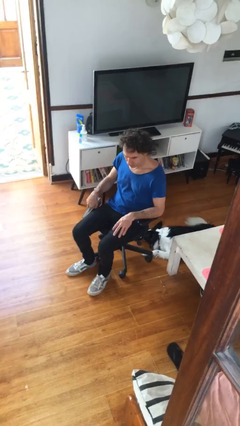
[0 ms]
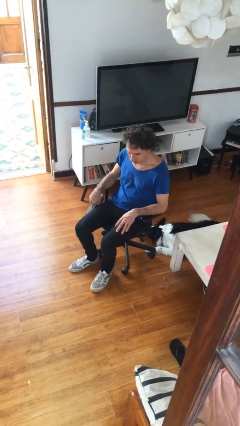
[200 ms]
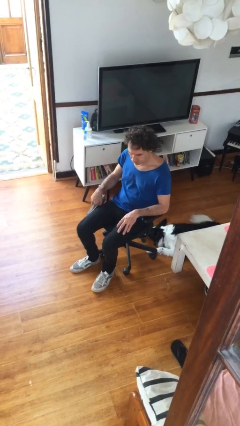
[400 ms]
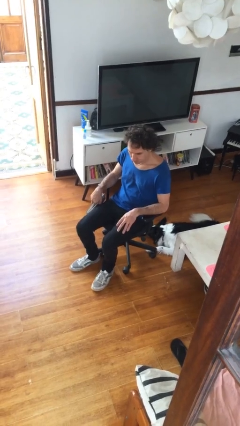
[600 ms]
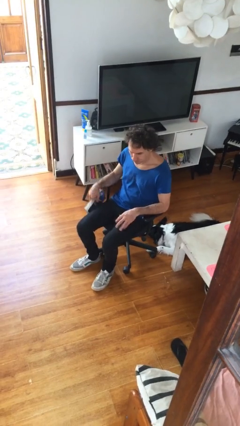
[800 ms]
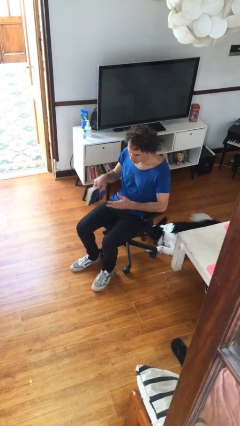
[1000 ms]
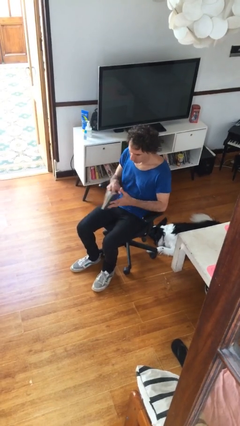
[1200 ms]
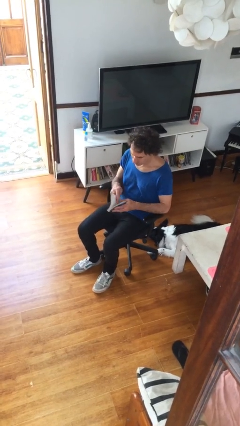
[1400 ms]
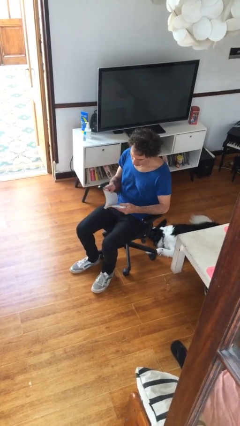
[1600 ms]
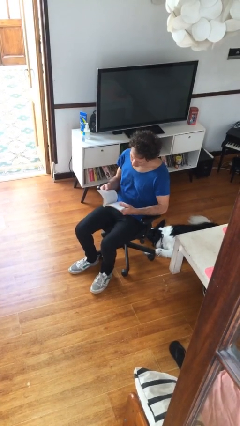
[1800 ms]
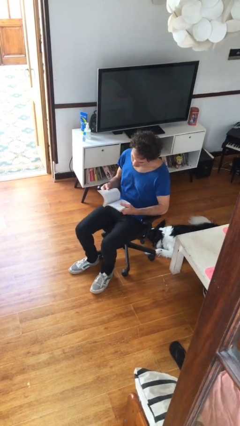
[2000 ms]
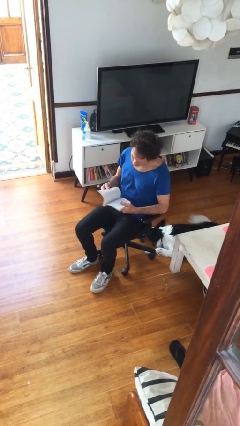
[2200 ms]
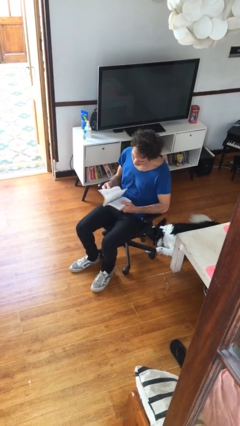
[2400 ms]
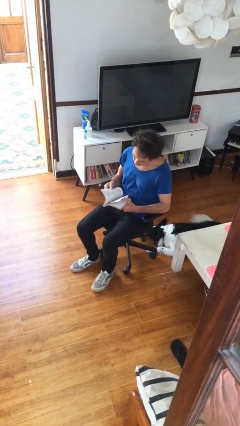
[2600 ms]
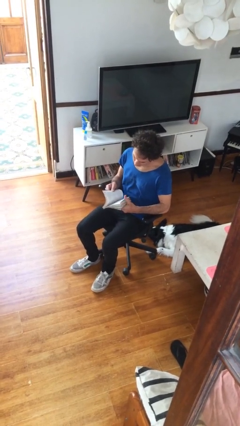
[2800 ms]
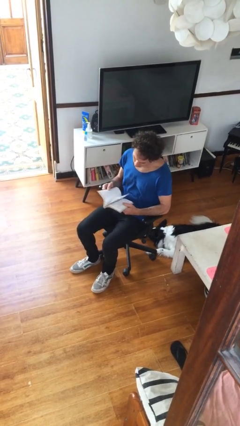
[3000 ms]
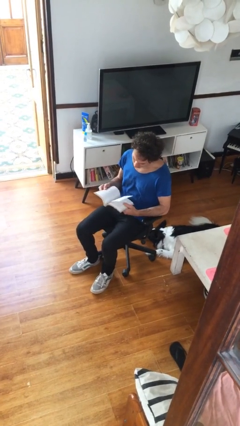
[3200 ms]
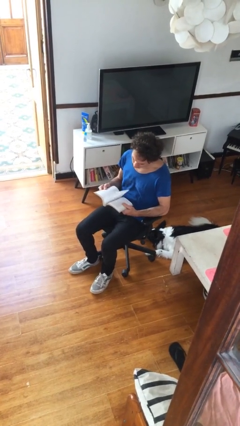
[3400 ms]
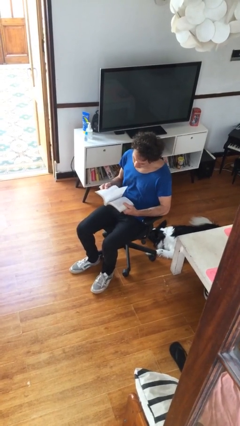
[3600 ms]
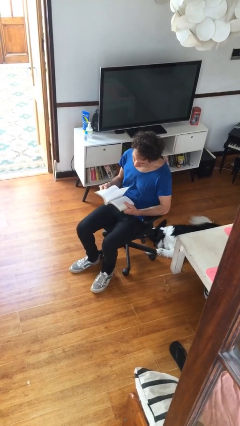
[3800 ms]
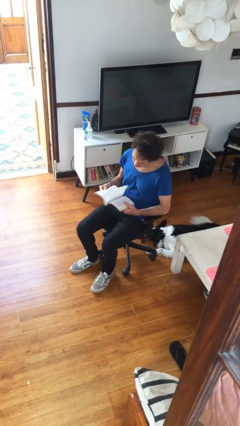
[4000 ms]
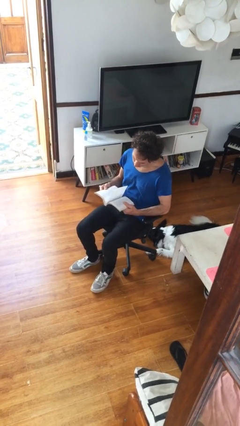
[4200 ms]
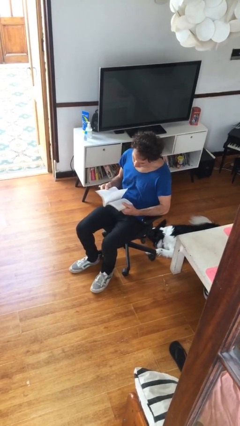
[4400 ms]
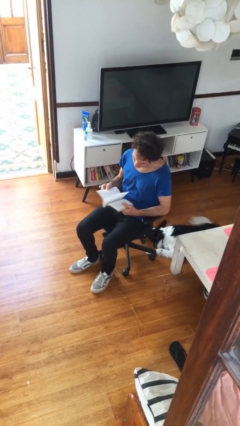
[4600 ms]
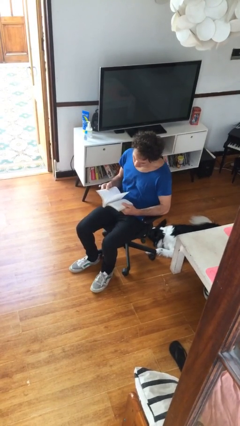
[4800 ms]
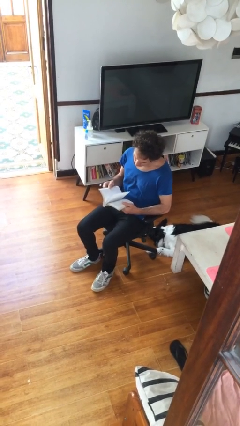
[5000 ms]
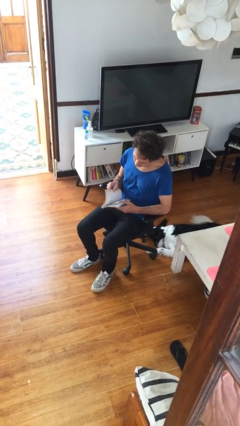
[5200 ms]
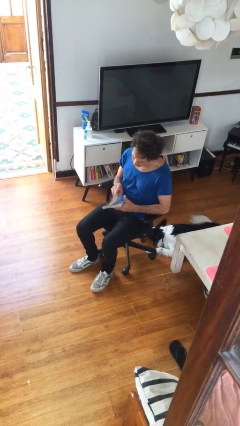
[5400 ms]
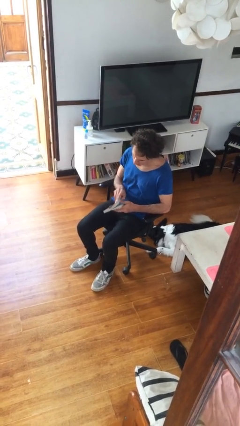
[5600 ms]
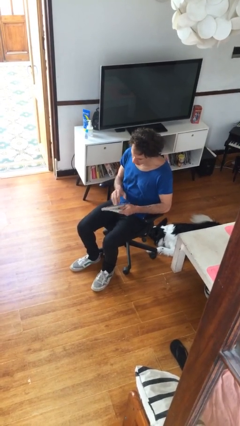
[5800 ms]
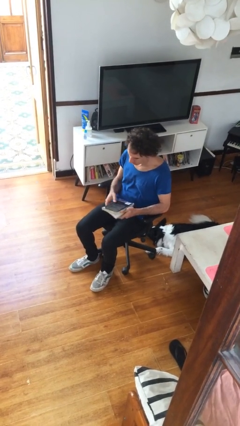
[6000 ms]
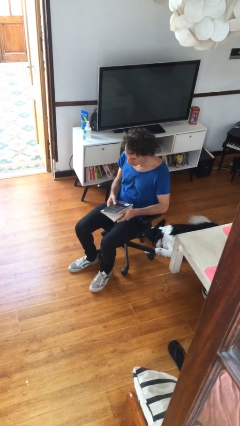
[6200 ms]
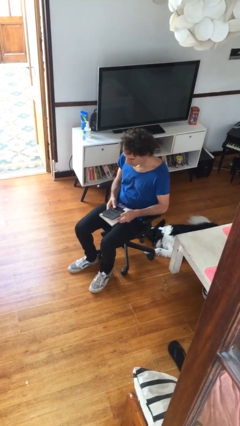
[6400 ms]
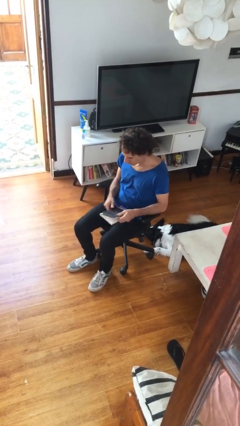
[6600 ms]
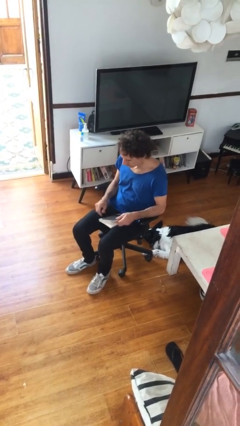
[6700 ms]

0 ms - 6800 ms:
person reads document

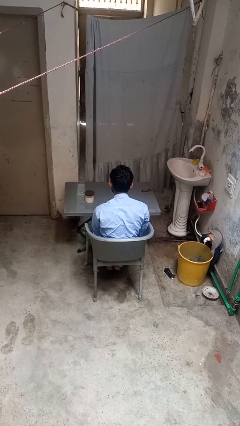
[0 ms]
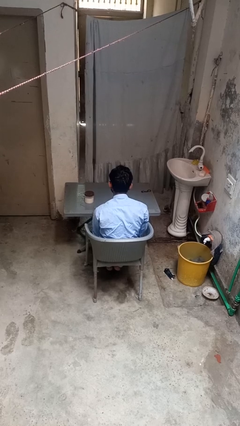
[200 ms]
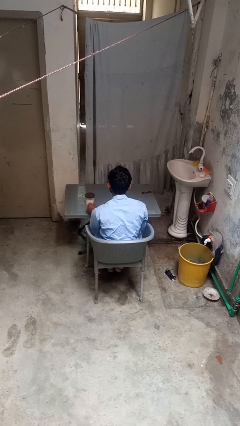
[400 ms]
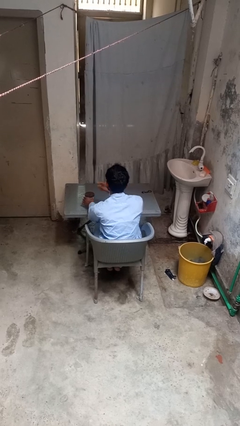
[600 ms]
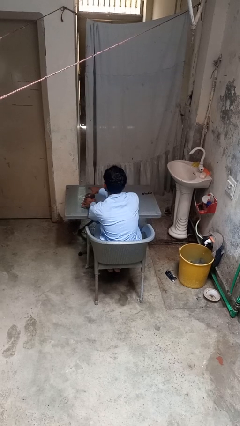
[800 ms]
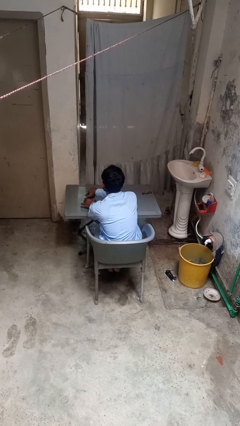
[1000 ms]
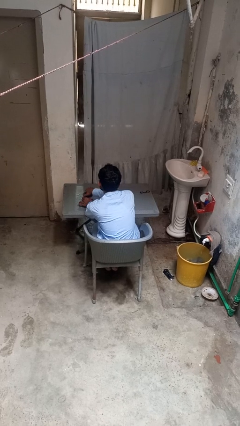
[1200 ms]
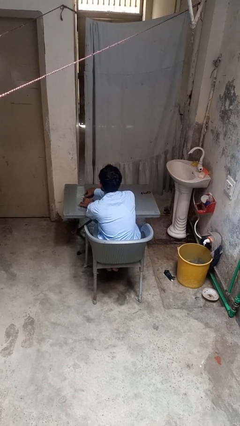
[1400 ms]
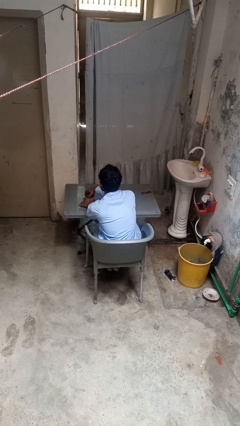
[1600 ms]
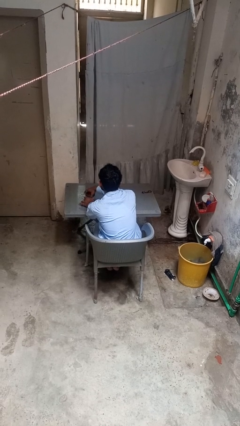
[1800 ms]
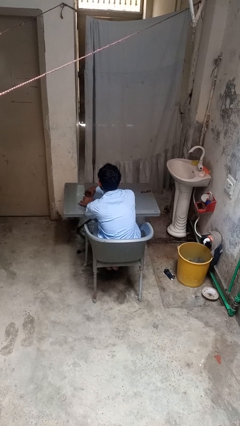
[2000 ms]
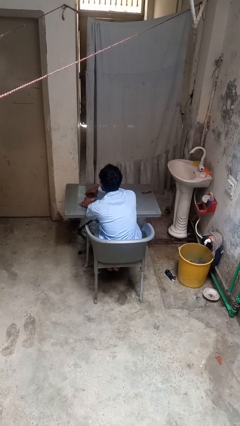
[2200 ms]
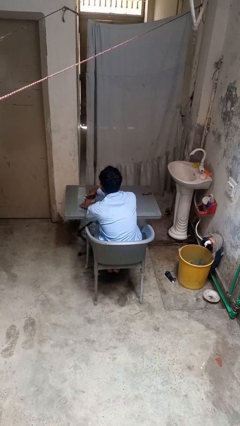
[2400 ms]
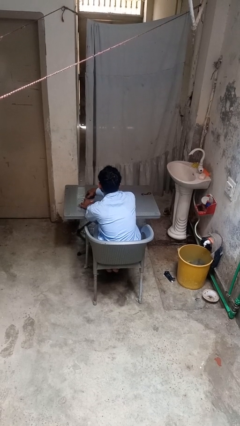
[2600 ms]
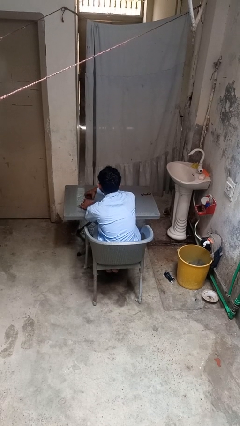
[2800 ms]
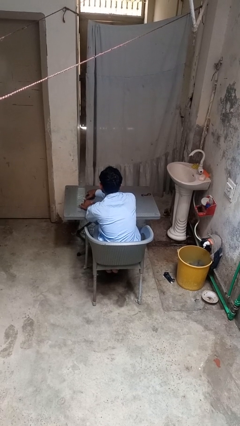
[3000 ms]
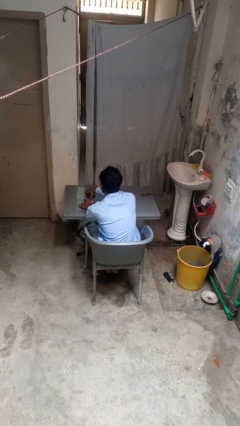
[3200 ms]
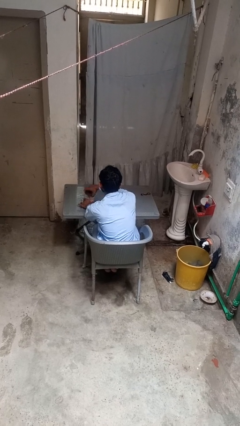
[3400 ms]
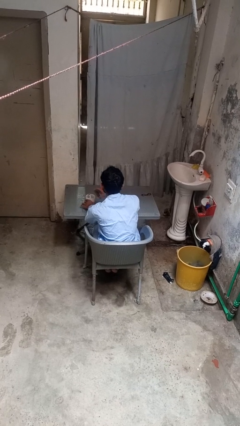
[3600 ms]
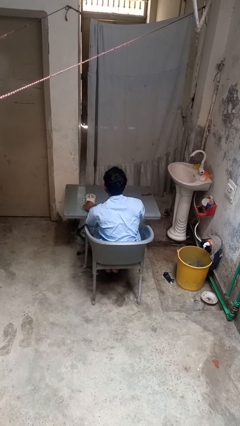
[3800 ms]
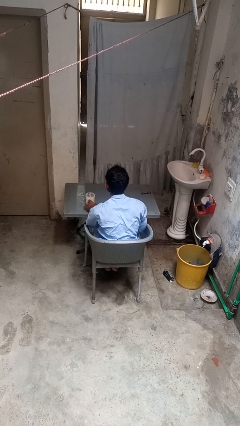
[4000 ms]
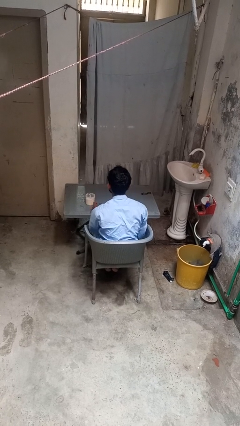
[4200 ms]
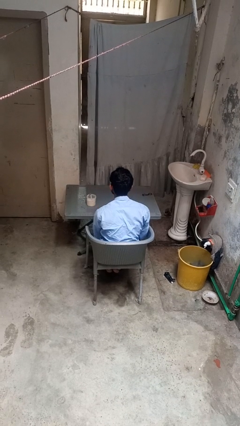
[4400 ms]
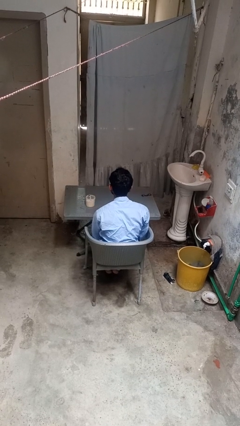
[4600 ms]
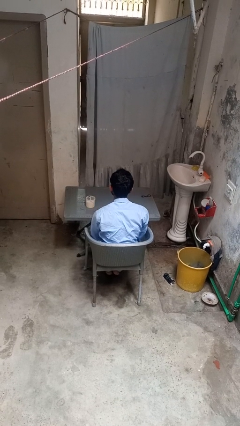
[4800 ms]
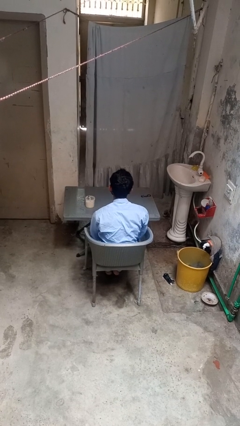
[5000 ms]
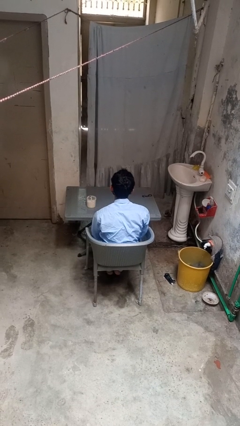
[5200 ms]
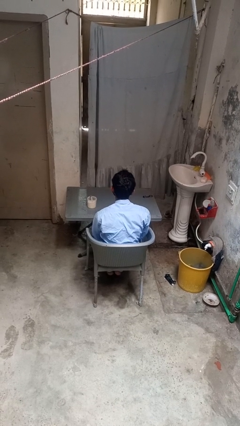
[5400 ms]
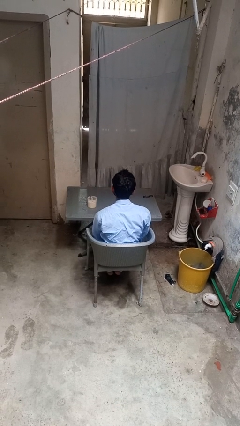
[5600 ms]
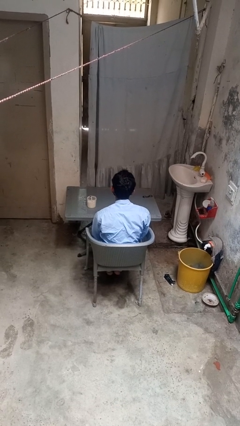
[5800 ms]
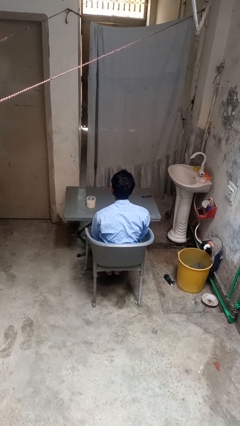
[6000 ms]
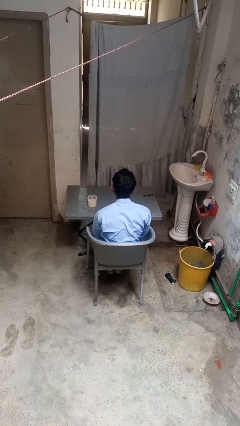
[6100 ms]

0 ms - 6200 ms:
person opens jar

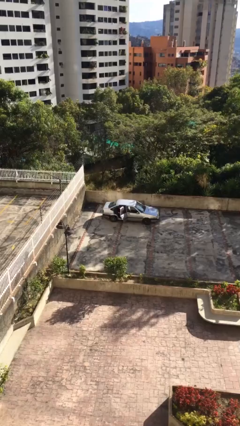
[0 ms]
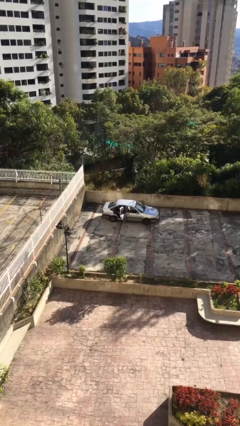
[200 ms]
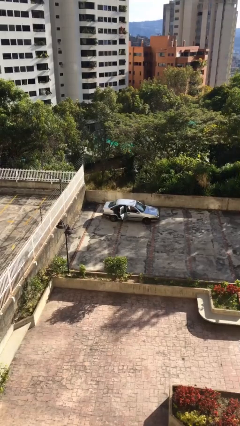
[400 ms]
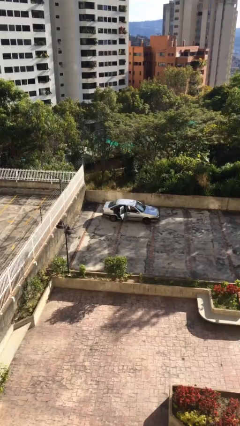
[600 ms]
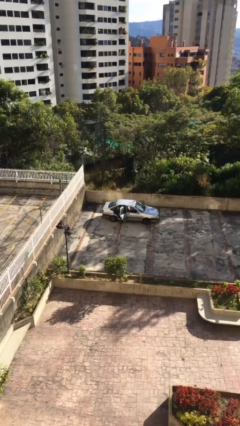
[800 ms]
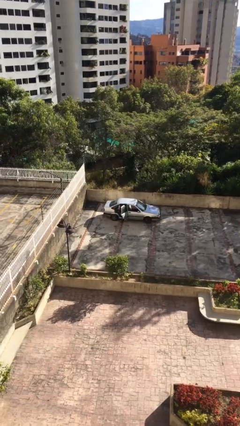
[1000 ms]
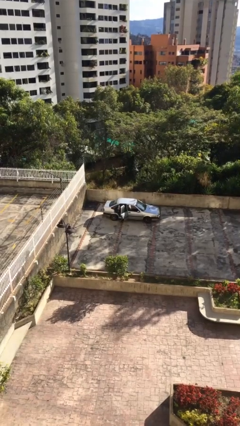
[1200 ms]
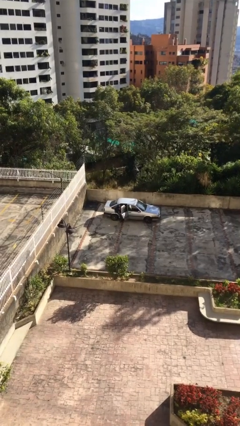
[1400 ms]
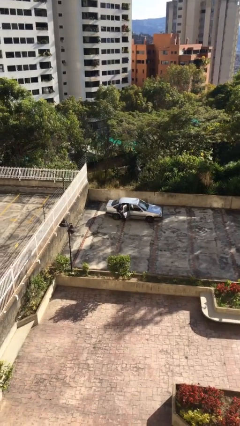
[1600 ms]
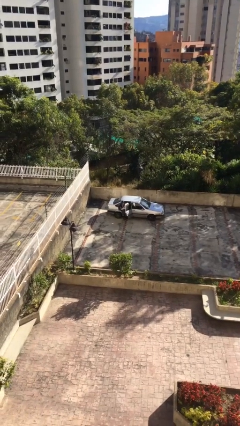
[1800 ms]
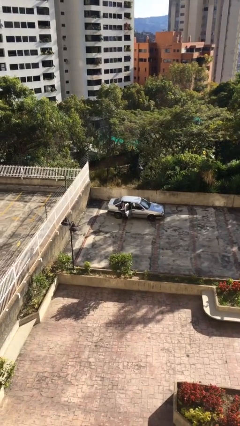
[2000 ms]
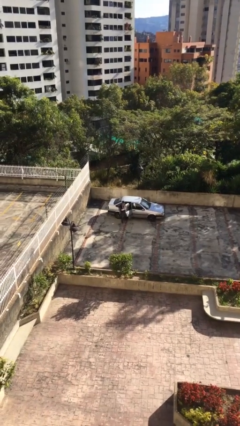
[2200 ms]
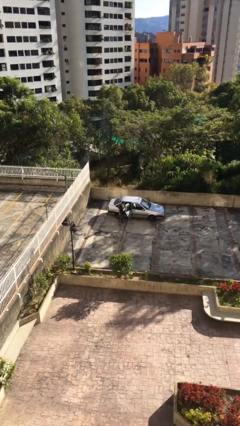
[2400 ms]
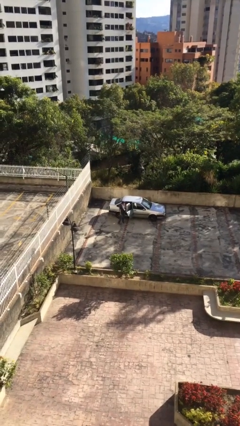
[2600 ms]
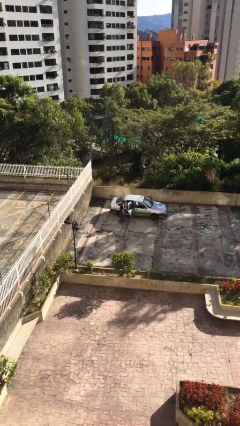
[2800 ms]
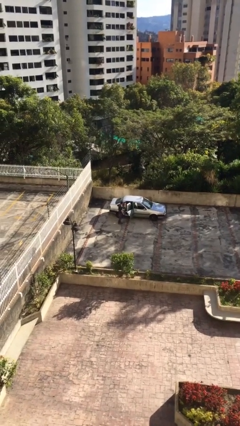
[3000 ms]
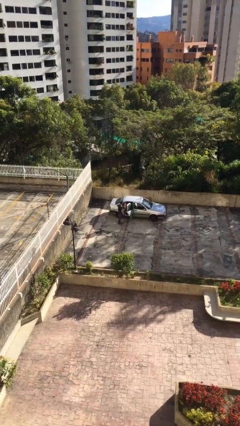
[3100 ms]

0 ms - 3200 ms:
person exits car

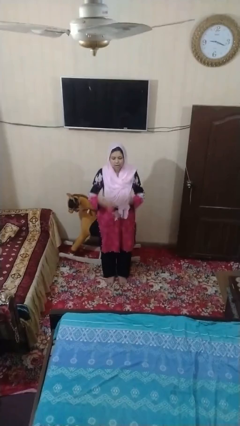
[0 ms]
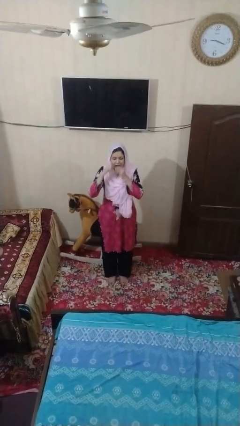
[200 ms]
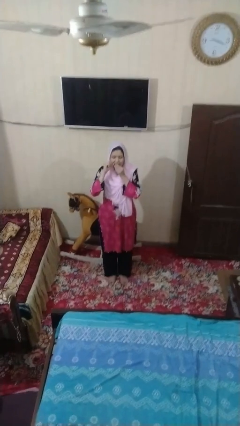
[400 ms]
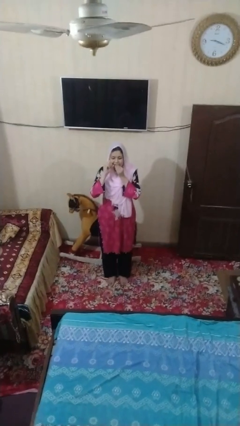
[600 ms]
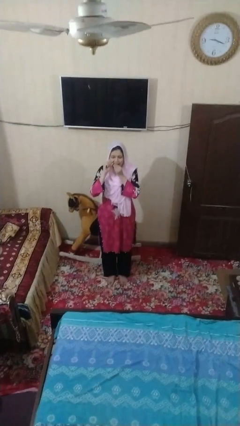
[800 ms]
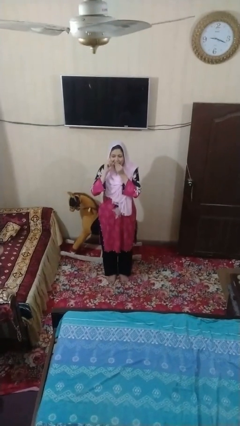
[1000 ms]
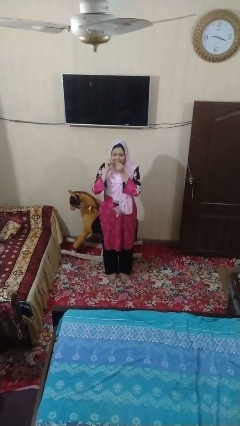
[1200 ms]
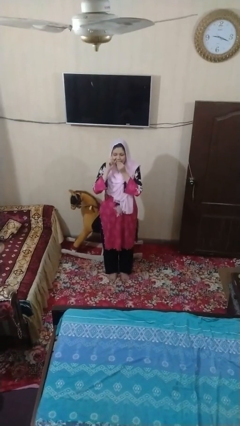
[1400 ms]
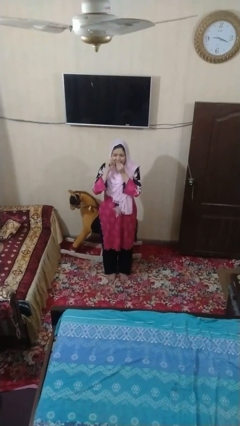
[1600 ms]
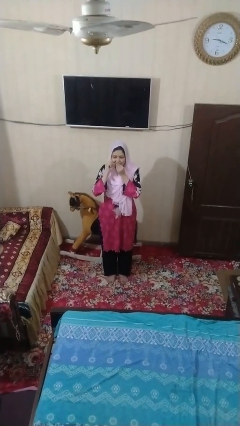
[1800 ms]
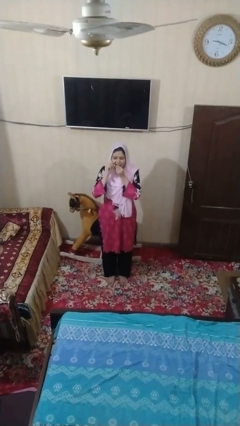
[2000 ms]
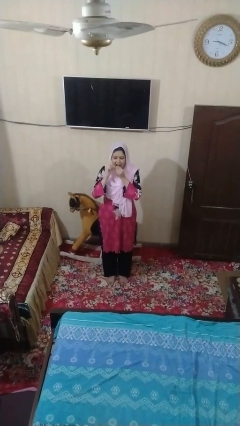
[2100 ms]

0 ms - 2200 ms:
person flosses
